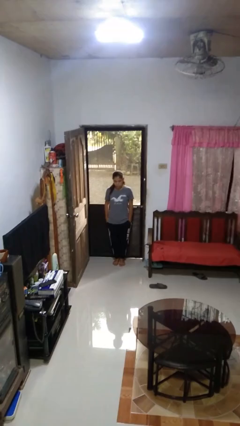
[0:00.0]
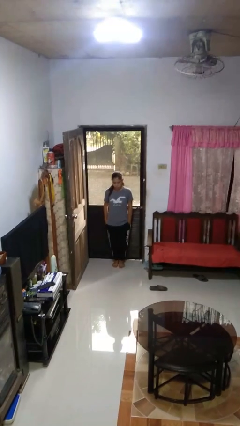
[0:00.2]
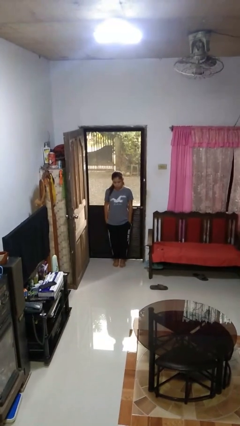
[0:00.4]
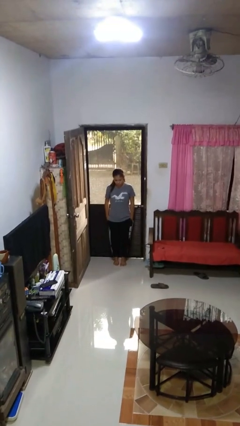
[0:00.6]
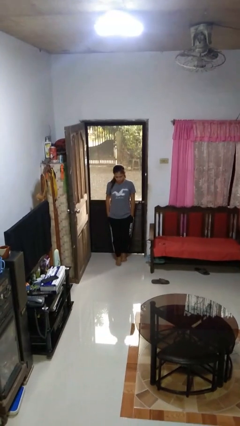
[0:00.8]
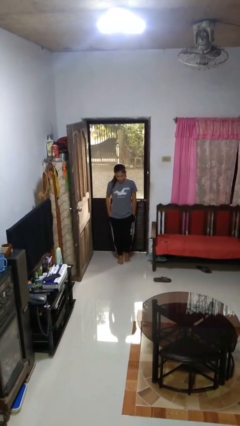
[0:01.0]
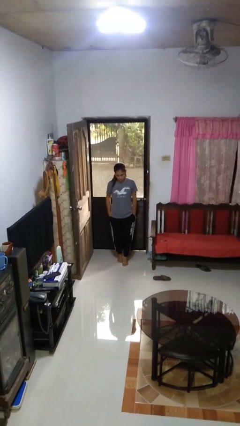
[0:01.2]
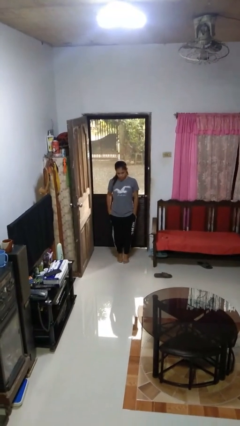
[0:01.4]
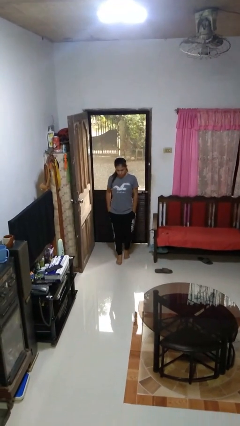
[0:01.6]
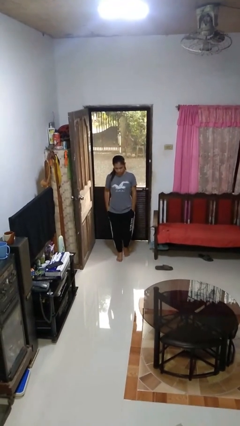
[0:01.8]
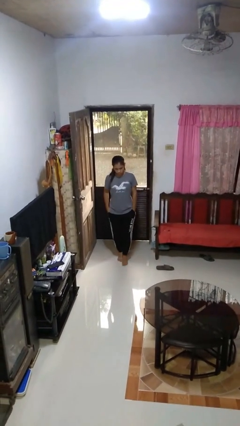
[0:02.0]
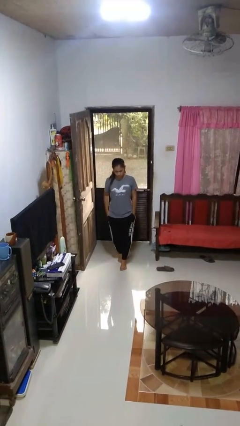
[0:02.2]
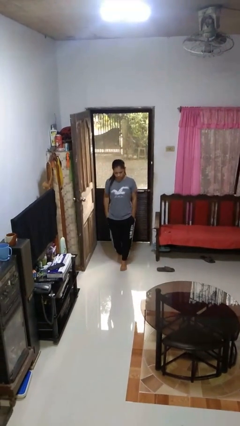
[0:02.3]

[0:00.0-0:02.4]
person walks tiptoe

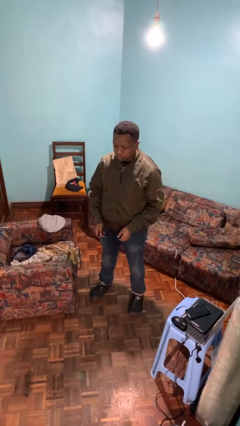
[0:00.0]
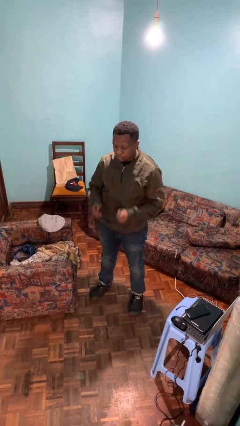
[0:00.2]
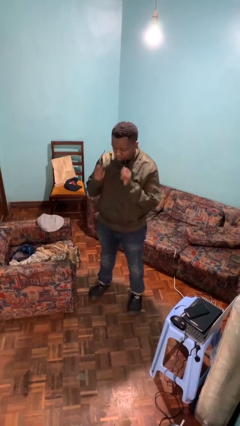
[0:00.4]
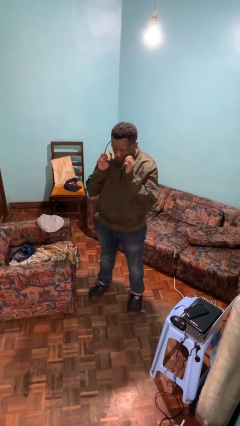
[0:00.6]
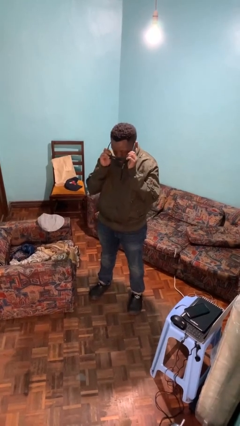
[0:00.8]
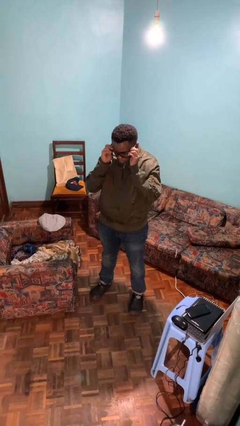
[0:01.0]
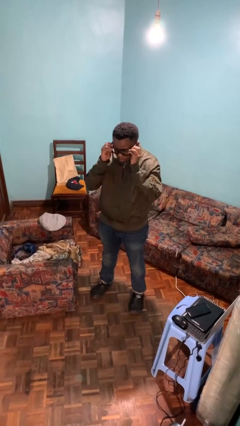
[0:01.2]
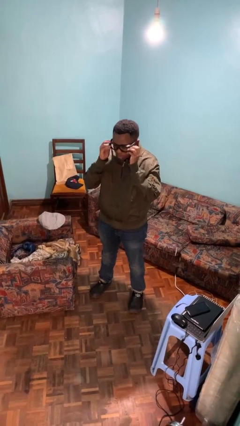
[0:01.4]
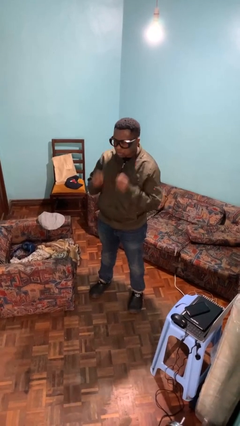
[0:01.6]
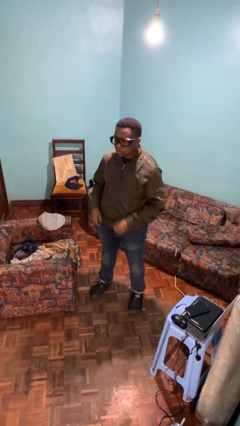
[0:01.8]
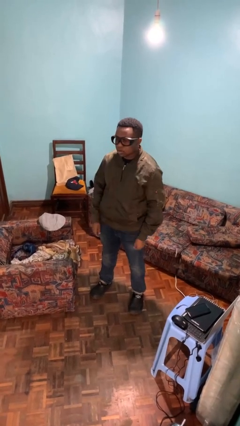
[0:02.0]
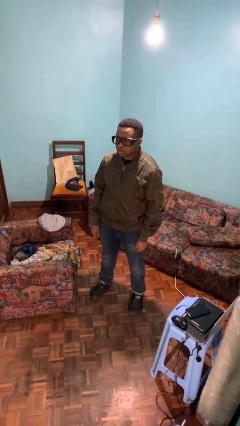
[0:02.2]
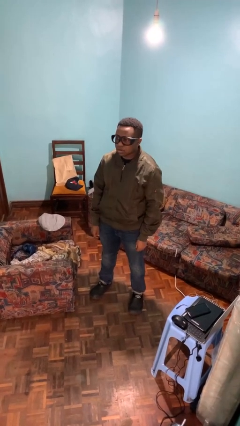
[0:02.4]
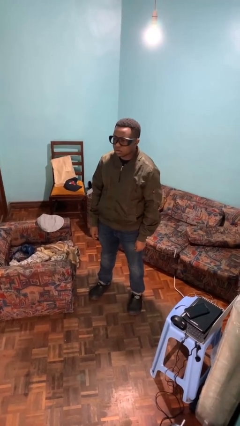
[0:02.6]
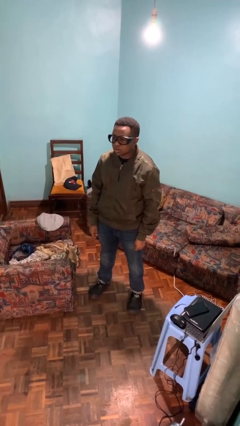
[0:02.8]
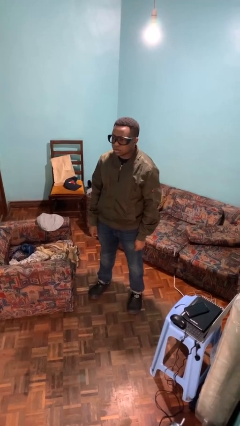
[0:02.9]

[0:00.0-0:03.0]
person puts on glasses

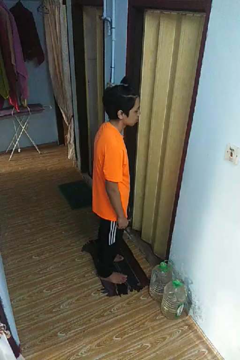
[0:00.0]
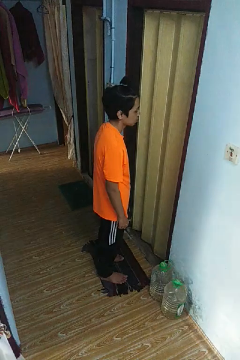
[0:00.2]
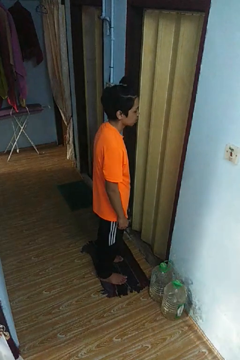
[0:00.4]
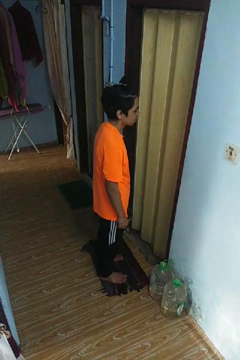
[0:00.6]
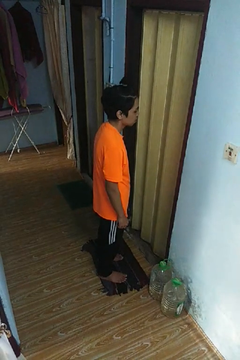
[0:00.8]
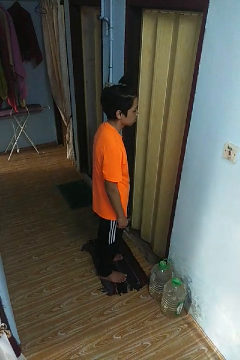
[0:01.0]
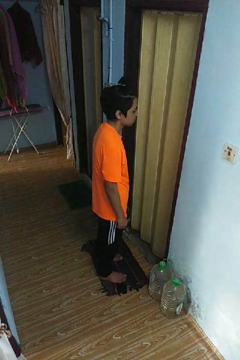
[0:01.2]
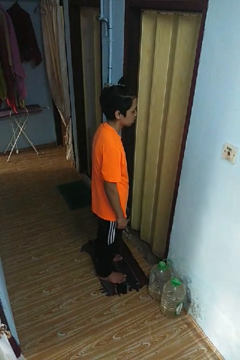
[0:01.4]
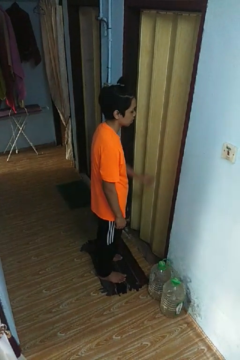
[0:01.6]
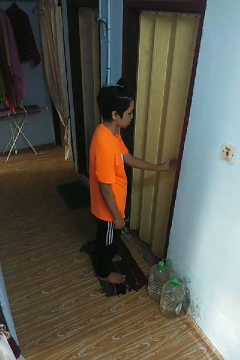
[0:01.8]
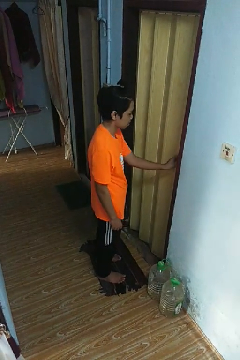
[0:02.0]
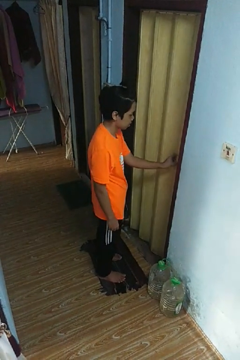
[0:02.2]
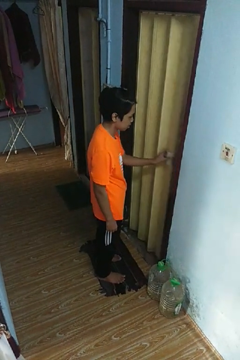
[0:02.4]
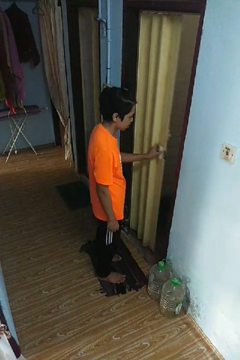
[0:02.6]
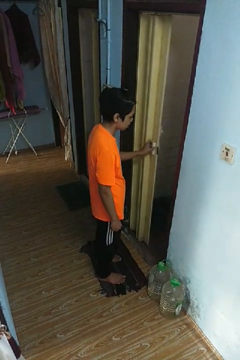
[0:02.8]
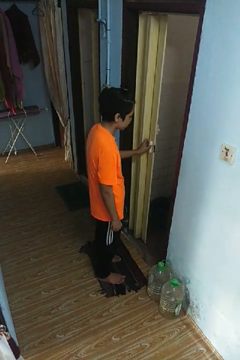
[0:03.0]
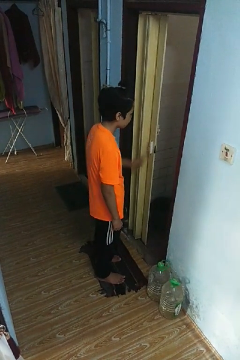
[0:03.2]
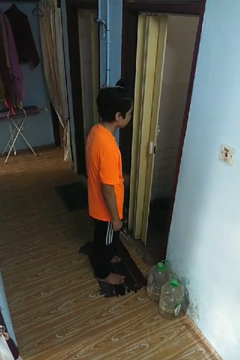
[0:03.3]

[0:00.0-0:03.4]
person opens sliding door

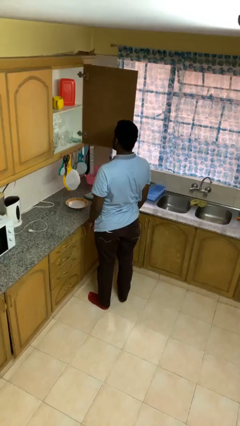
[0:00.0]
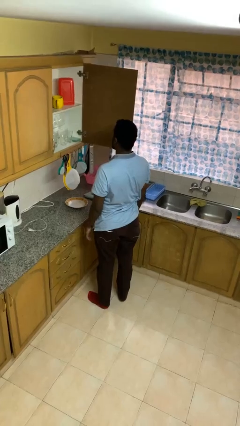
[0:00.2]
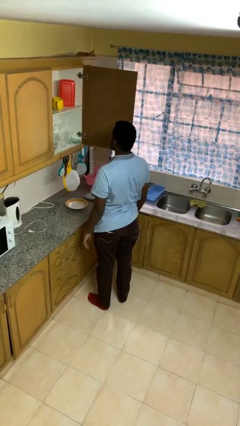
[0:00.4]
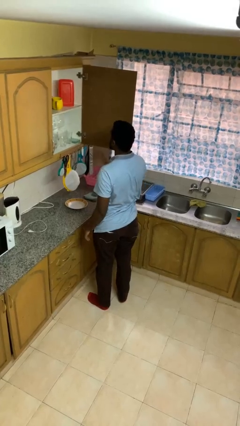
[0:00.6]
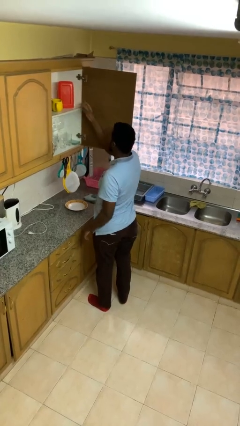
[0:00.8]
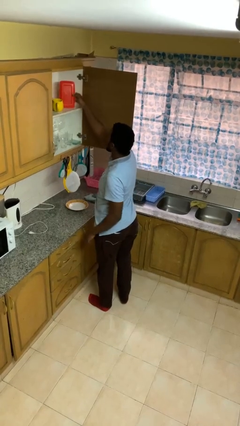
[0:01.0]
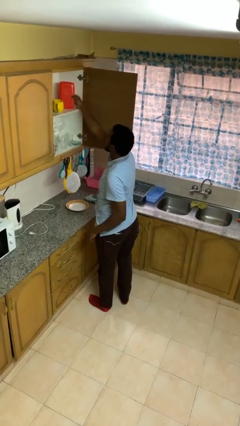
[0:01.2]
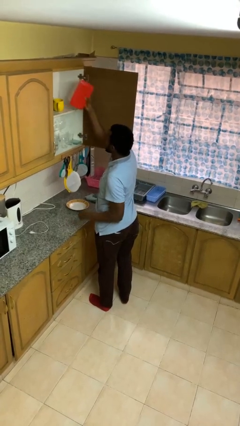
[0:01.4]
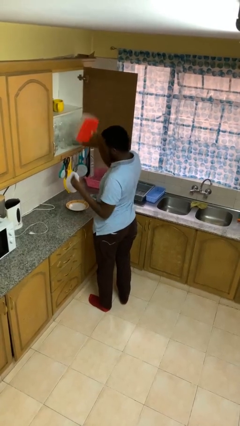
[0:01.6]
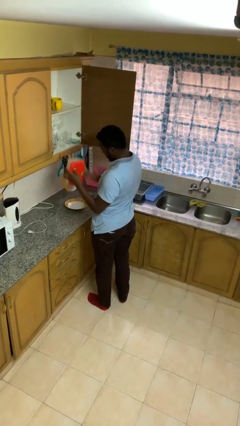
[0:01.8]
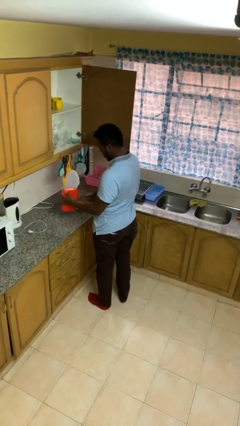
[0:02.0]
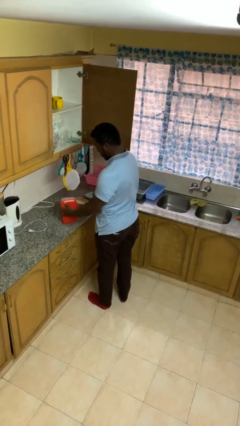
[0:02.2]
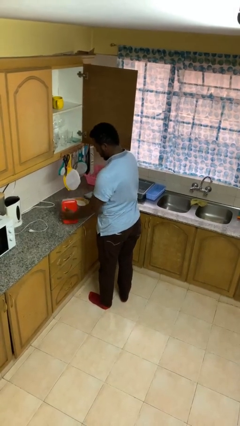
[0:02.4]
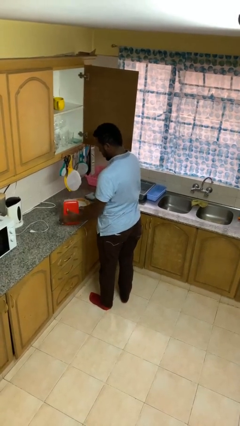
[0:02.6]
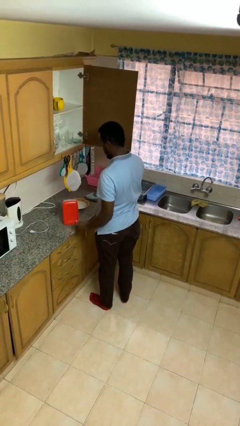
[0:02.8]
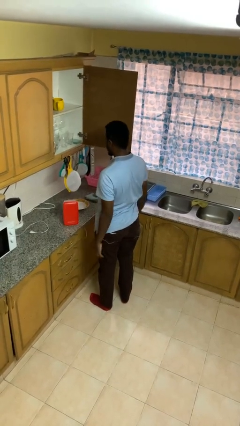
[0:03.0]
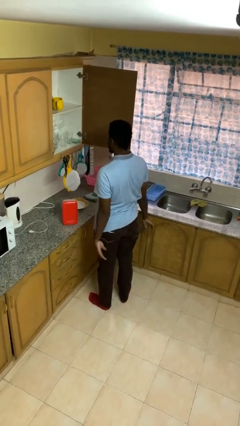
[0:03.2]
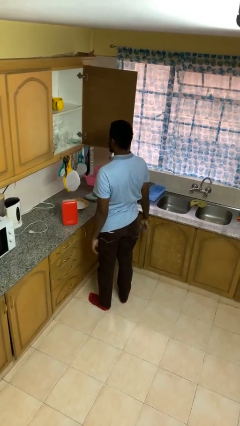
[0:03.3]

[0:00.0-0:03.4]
person takes object from cabinet

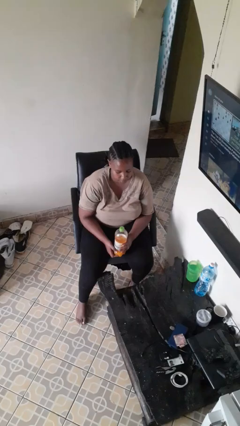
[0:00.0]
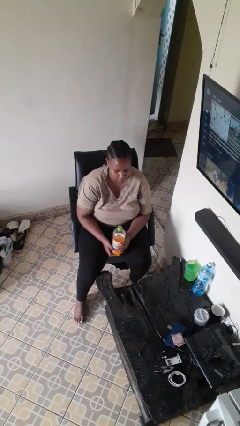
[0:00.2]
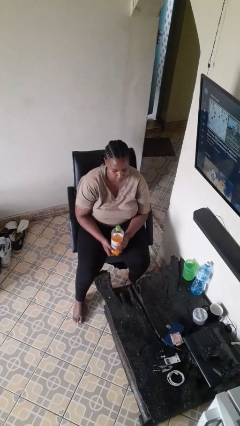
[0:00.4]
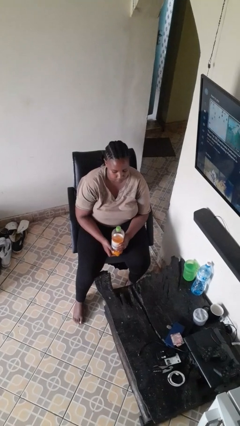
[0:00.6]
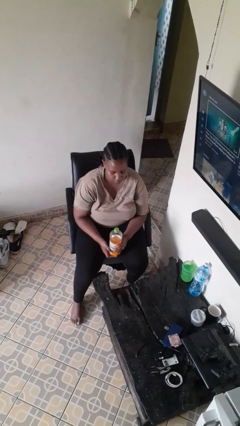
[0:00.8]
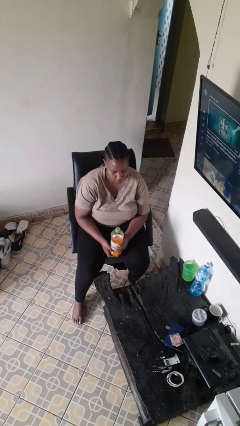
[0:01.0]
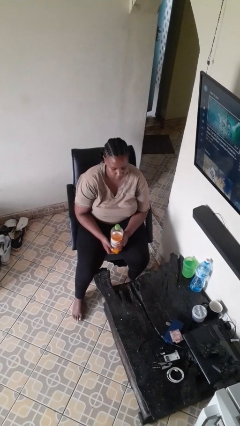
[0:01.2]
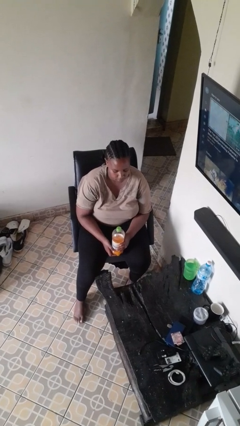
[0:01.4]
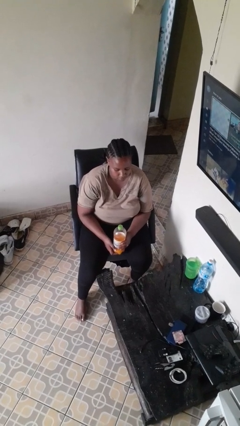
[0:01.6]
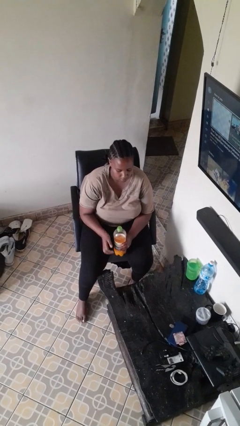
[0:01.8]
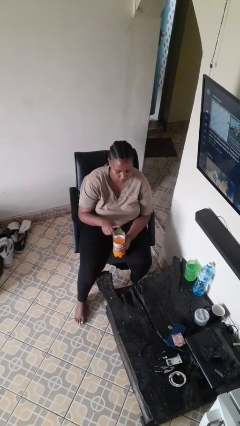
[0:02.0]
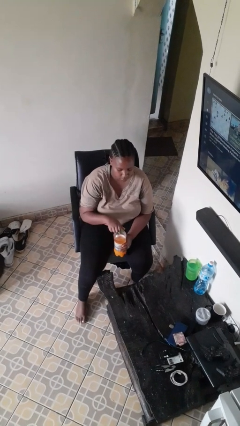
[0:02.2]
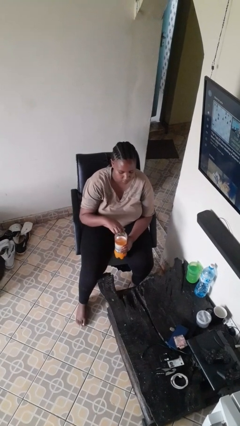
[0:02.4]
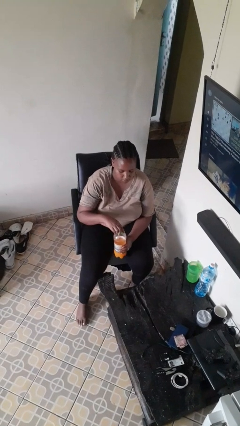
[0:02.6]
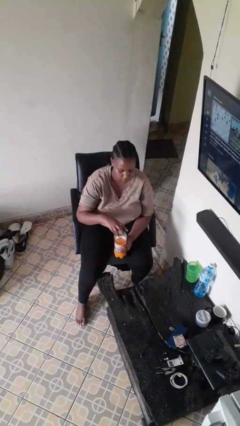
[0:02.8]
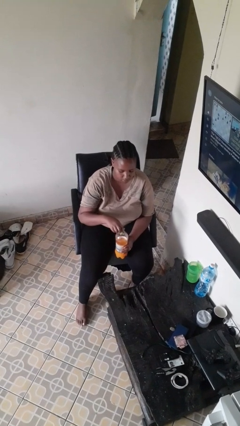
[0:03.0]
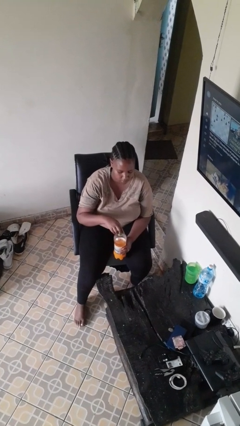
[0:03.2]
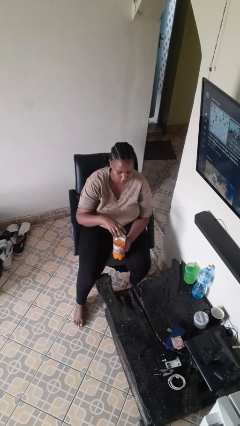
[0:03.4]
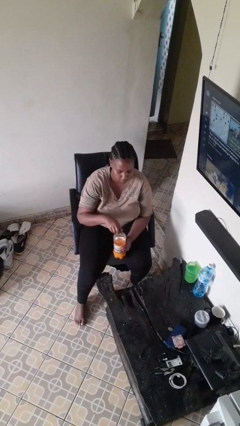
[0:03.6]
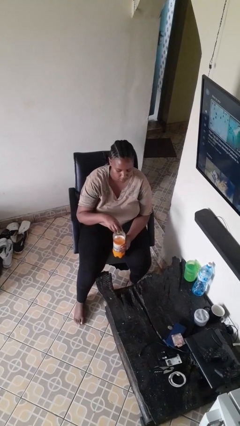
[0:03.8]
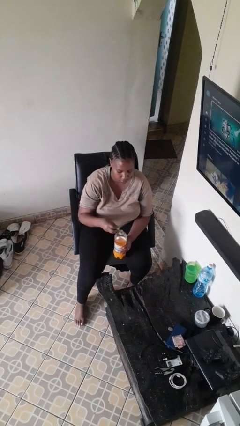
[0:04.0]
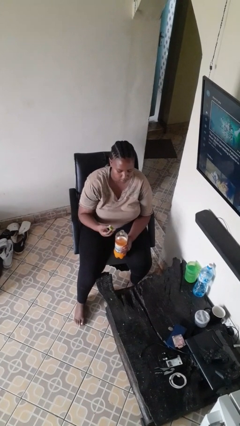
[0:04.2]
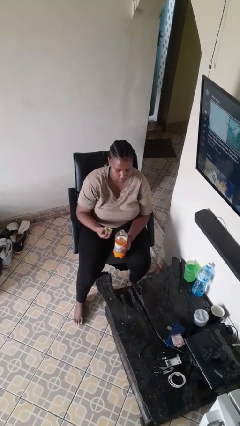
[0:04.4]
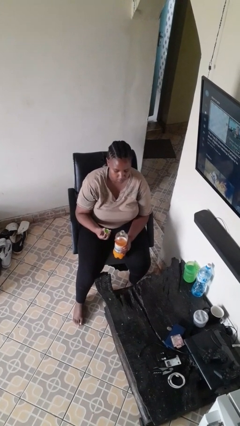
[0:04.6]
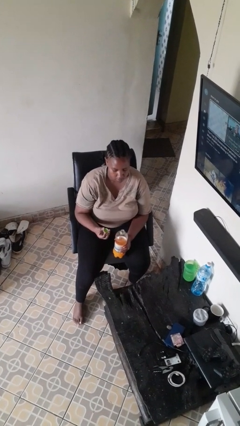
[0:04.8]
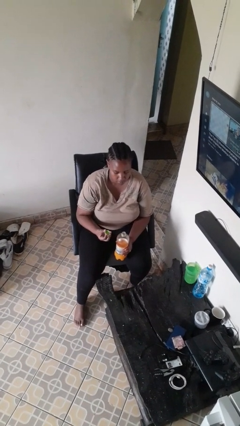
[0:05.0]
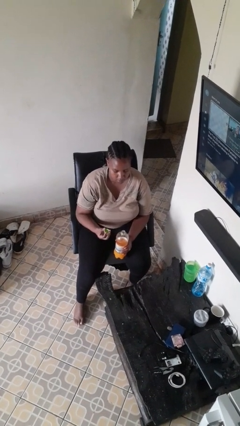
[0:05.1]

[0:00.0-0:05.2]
person unscrews lid from bottle

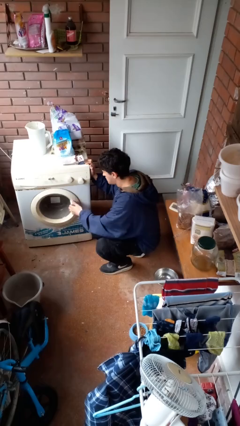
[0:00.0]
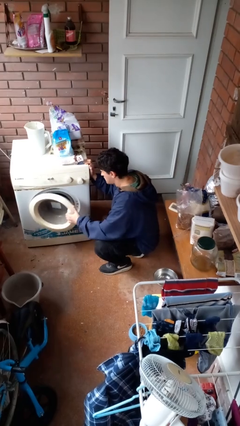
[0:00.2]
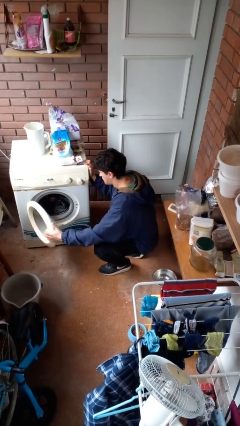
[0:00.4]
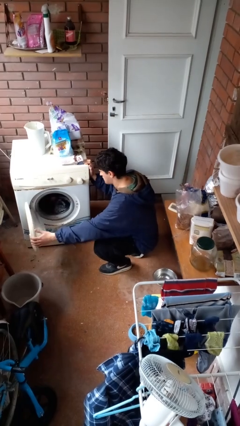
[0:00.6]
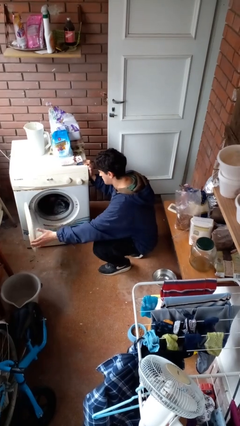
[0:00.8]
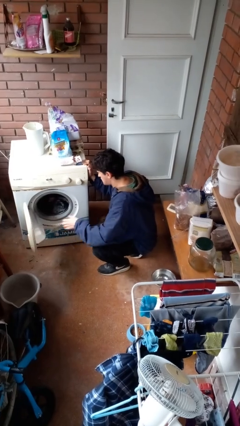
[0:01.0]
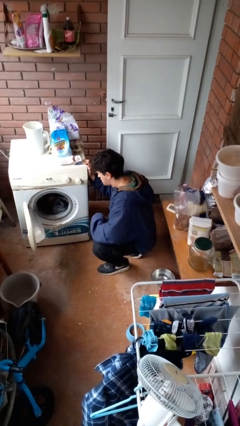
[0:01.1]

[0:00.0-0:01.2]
person opens clothes washer
